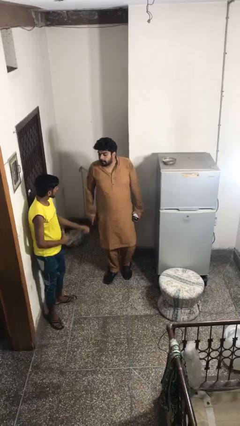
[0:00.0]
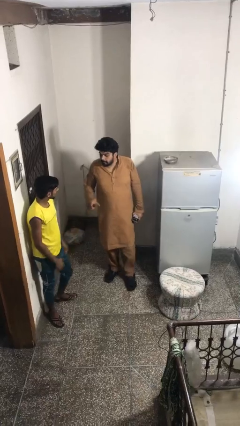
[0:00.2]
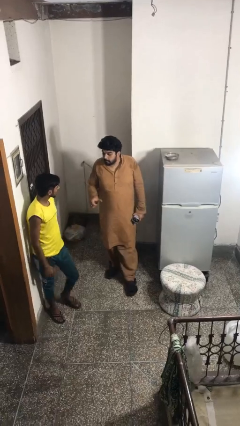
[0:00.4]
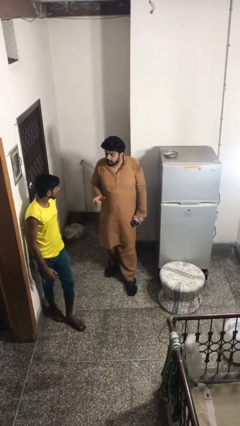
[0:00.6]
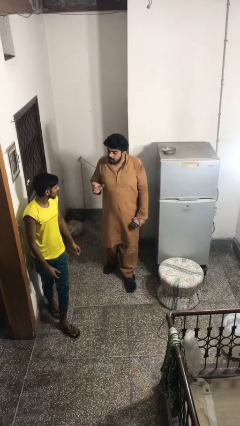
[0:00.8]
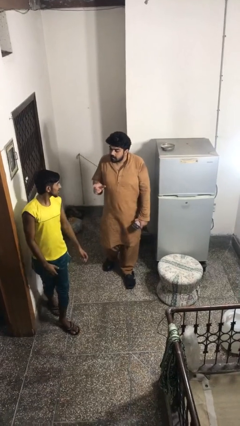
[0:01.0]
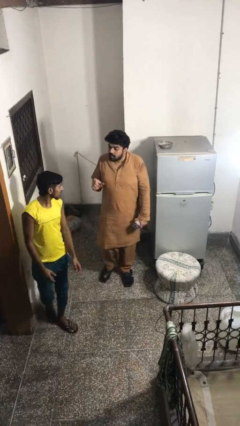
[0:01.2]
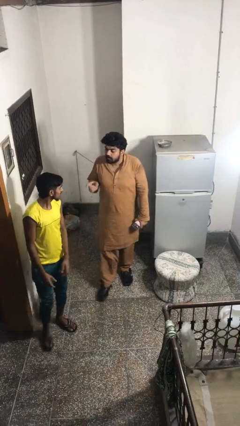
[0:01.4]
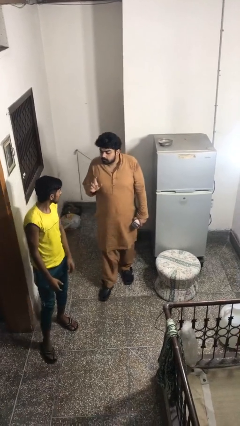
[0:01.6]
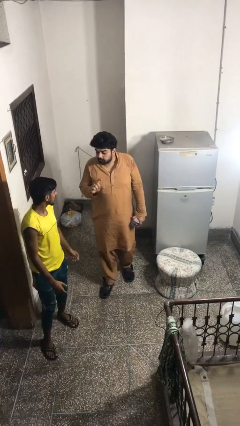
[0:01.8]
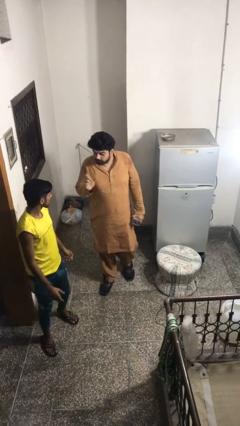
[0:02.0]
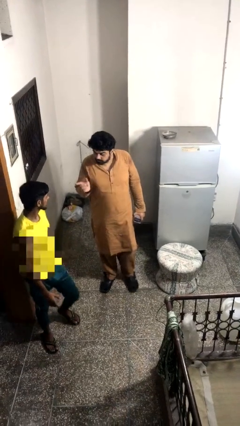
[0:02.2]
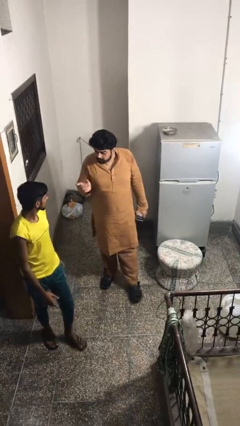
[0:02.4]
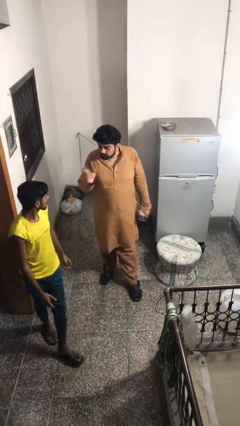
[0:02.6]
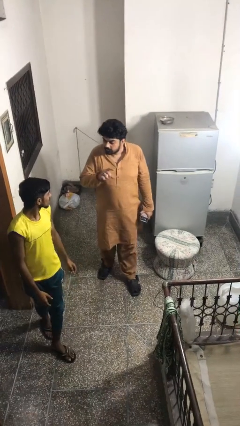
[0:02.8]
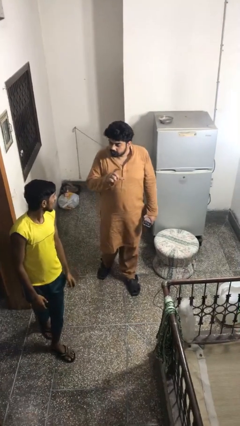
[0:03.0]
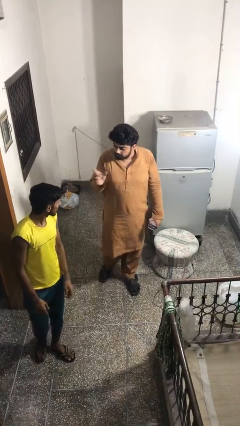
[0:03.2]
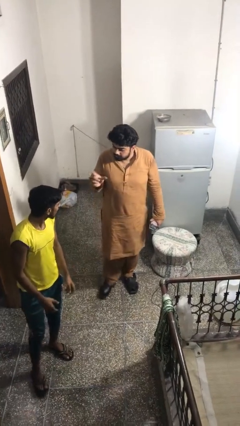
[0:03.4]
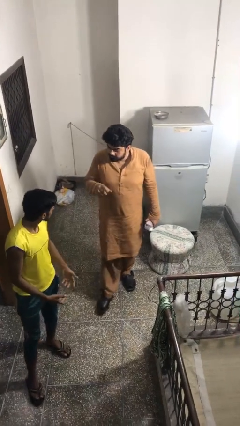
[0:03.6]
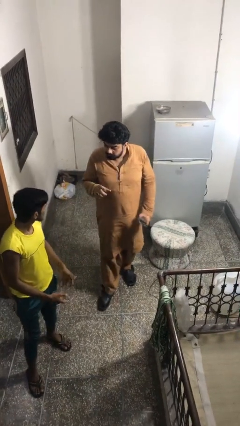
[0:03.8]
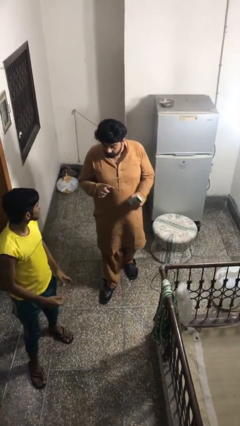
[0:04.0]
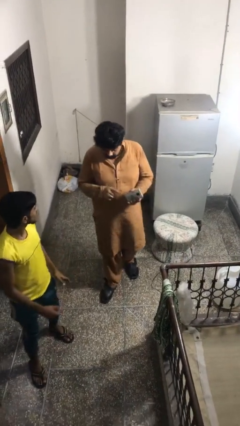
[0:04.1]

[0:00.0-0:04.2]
person talks to person

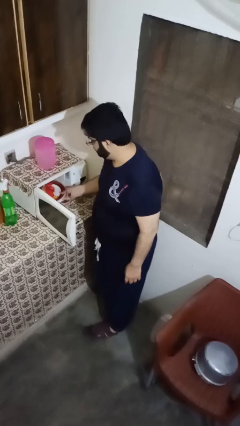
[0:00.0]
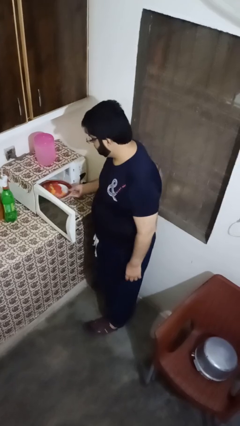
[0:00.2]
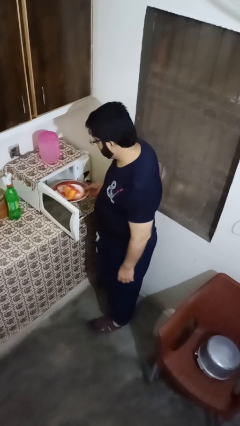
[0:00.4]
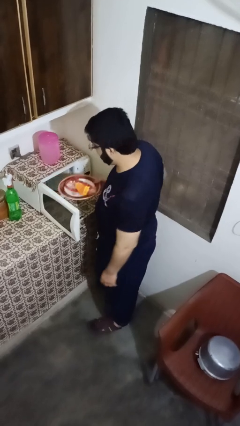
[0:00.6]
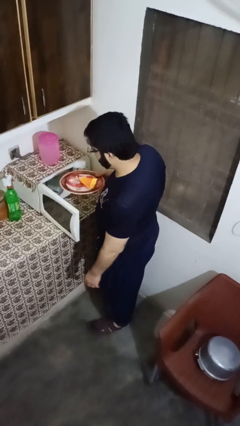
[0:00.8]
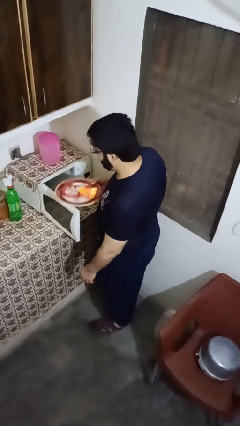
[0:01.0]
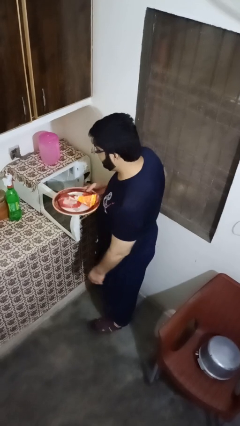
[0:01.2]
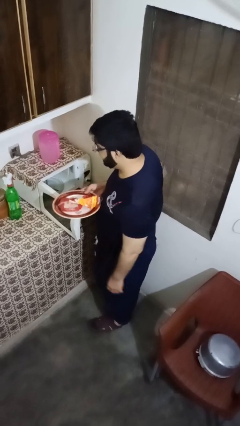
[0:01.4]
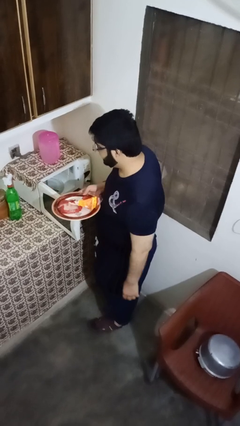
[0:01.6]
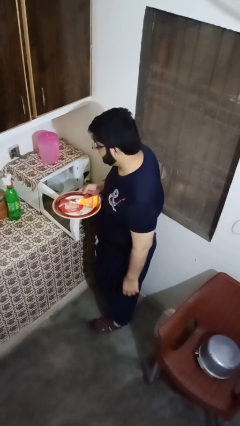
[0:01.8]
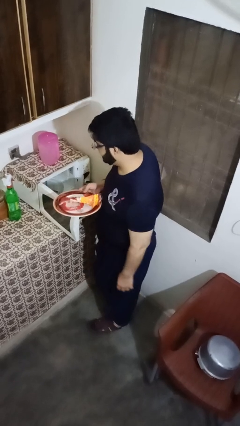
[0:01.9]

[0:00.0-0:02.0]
person takes object from oven

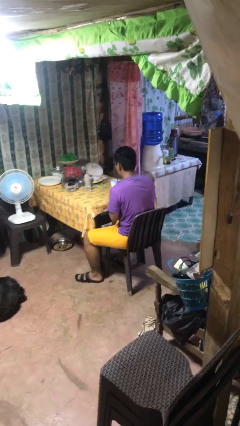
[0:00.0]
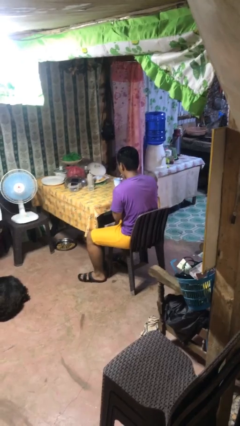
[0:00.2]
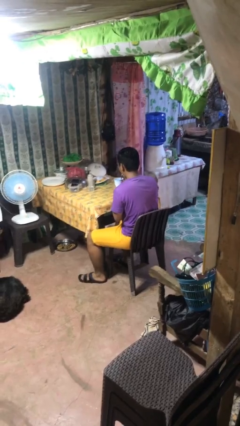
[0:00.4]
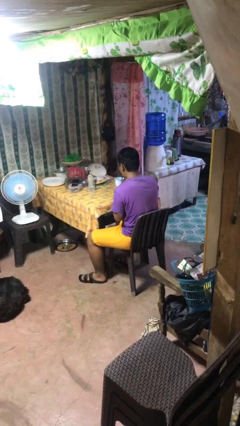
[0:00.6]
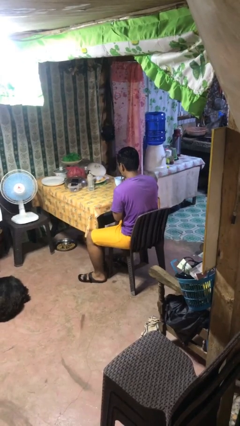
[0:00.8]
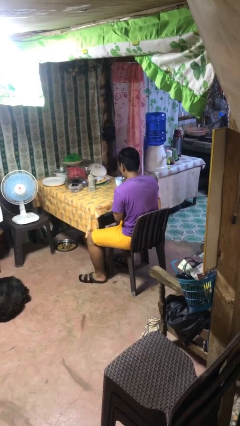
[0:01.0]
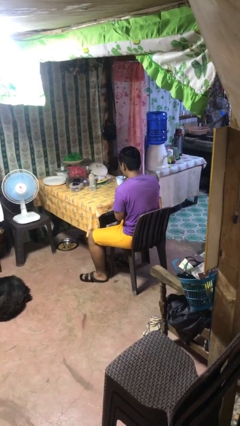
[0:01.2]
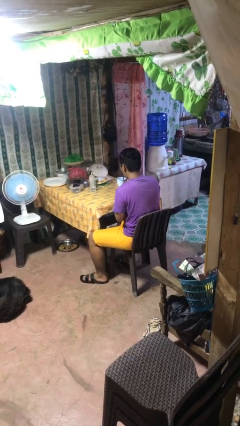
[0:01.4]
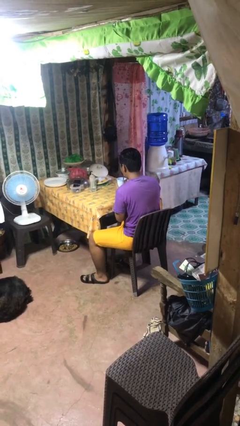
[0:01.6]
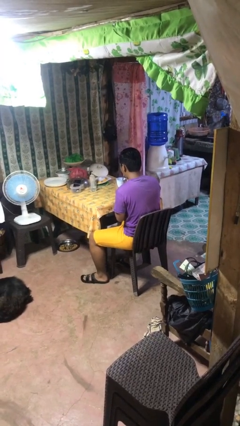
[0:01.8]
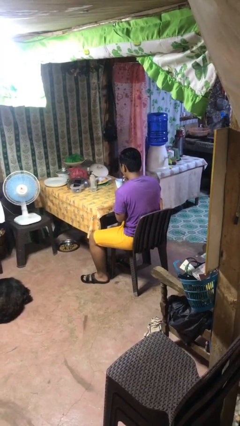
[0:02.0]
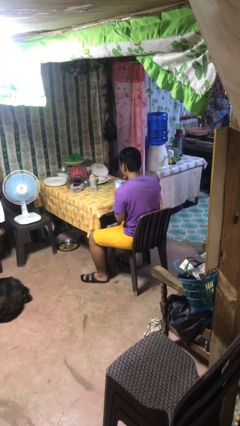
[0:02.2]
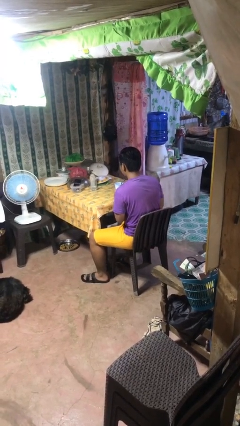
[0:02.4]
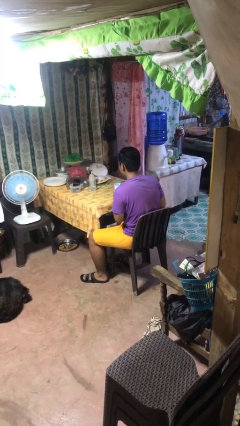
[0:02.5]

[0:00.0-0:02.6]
person drinks from straw

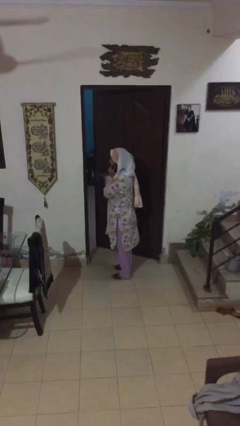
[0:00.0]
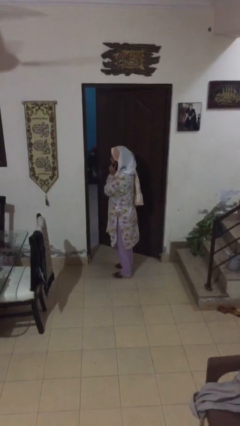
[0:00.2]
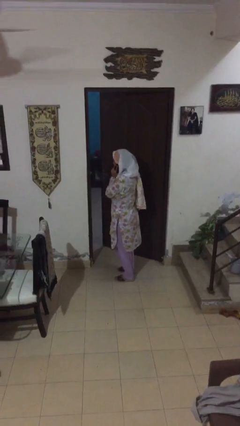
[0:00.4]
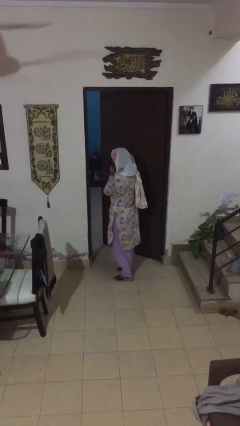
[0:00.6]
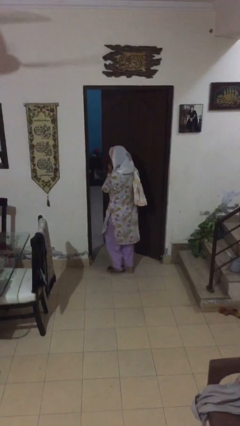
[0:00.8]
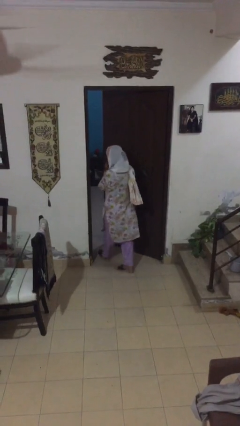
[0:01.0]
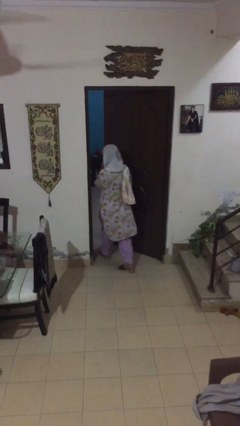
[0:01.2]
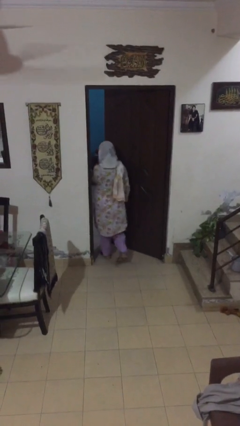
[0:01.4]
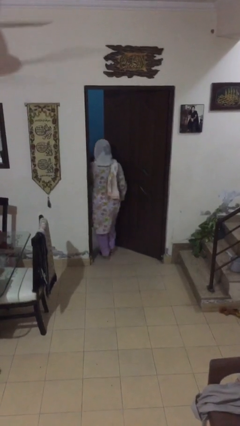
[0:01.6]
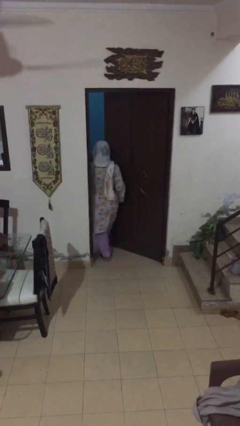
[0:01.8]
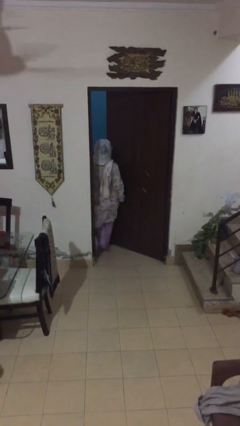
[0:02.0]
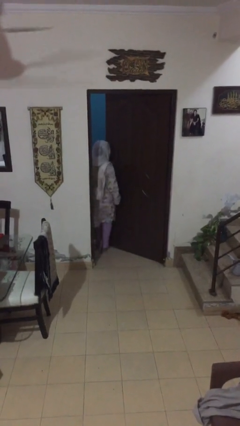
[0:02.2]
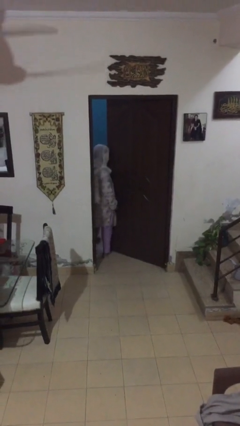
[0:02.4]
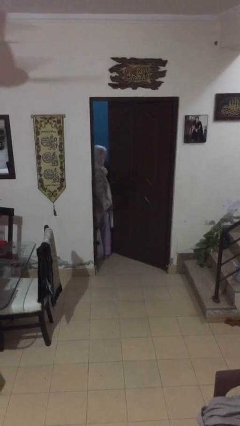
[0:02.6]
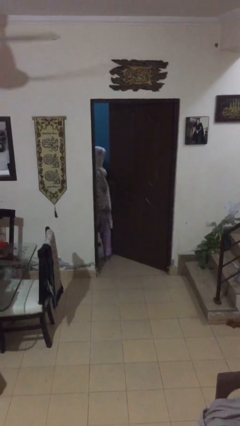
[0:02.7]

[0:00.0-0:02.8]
person exits scene through structure

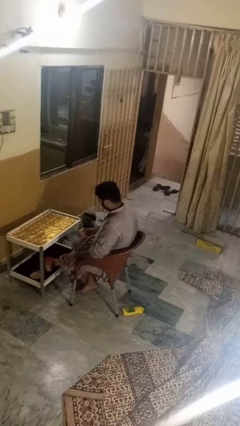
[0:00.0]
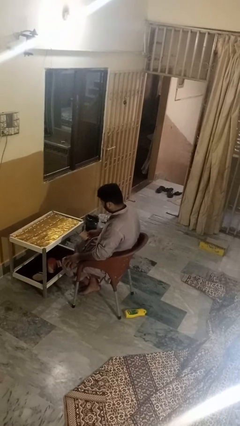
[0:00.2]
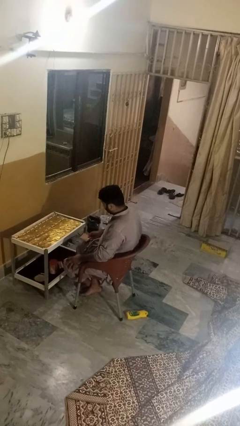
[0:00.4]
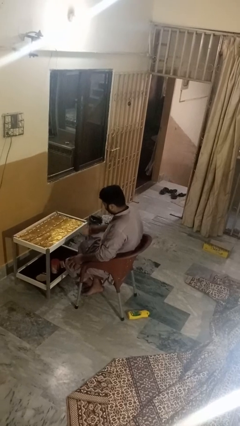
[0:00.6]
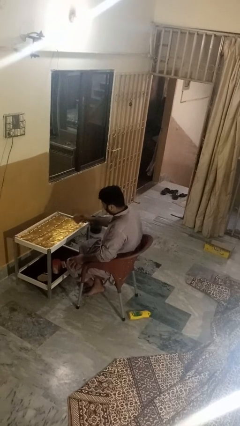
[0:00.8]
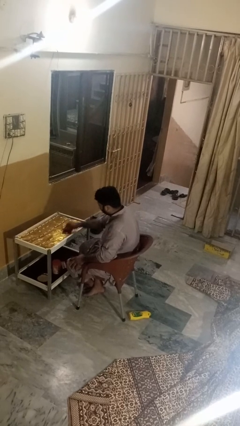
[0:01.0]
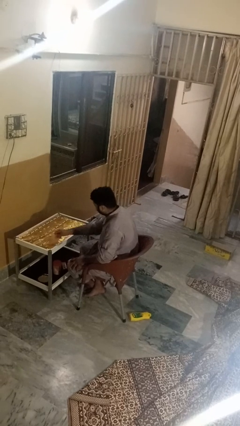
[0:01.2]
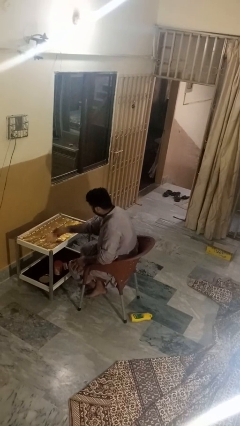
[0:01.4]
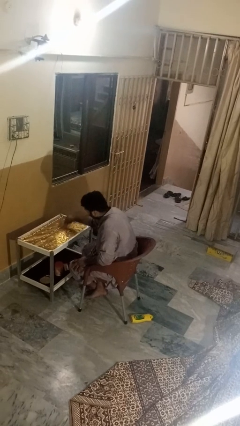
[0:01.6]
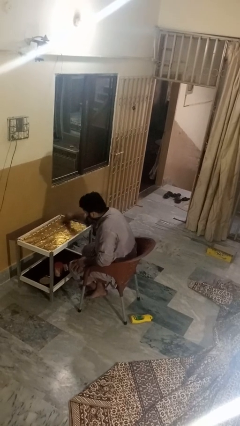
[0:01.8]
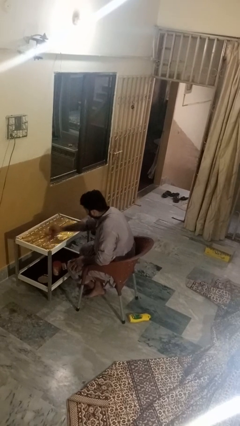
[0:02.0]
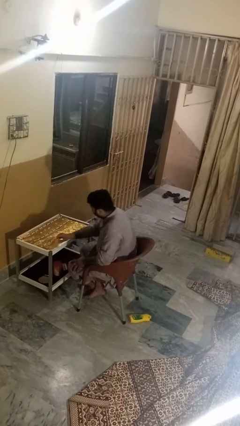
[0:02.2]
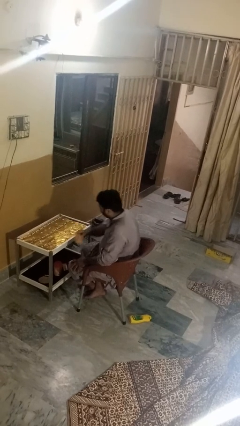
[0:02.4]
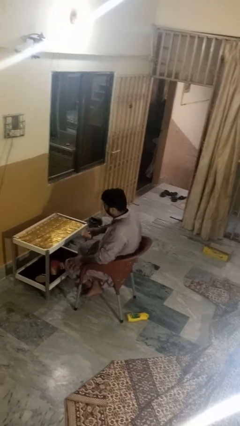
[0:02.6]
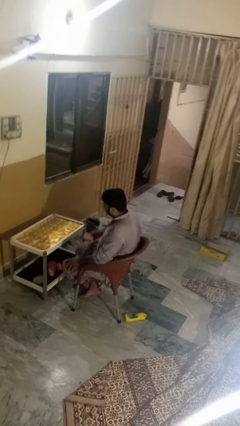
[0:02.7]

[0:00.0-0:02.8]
person cleans table with rag

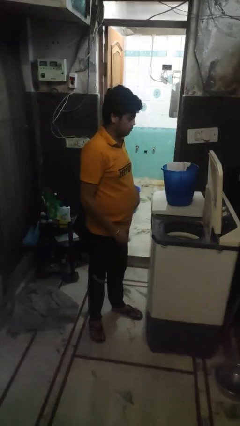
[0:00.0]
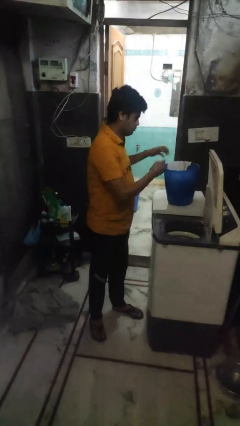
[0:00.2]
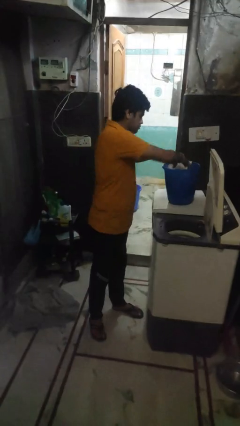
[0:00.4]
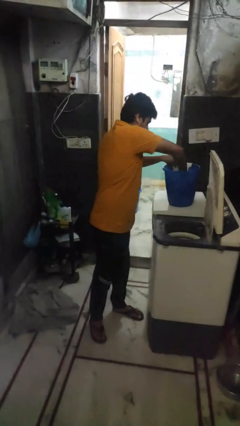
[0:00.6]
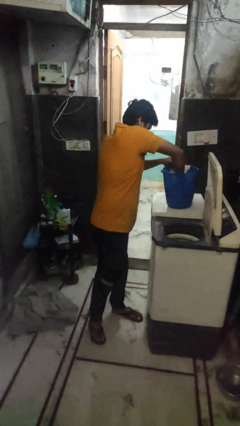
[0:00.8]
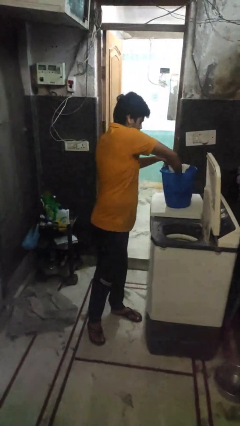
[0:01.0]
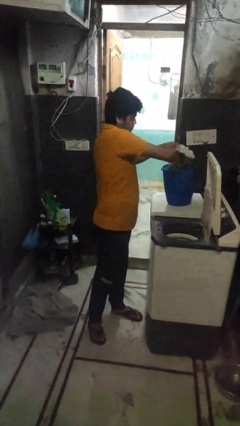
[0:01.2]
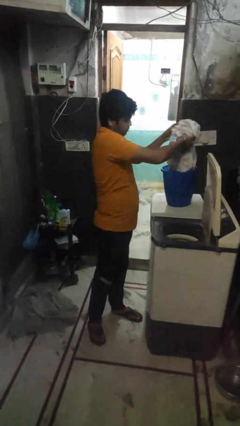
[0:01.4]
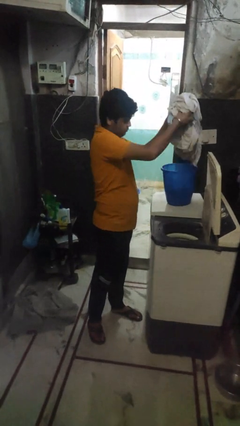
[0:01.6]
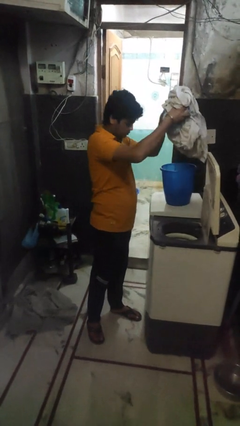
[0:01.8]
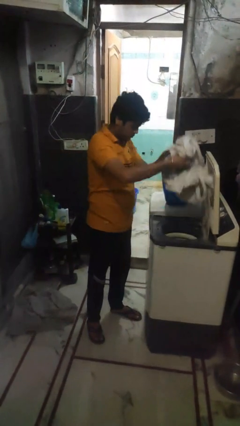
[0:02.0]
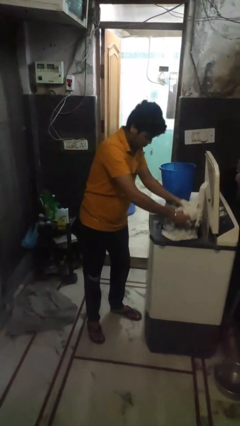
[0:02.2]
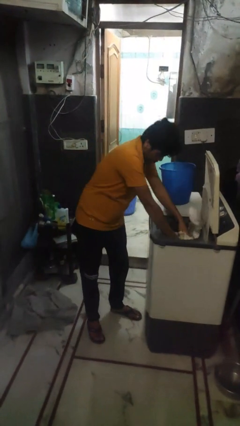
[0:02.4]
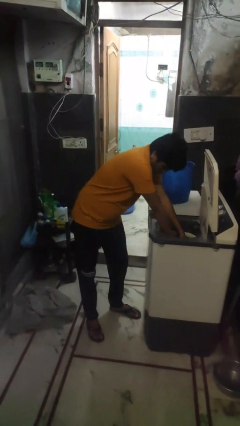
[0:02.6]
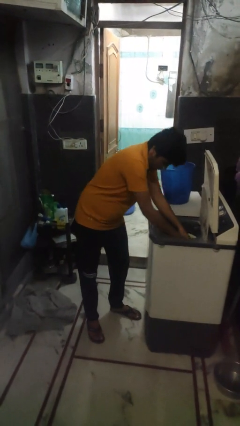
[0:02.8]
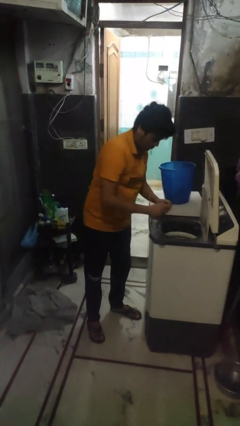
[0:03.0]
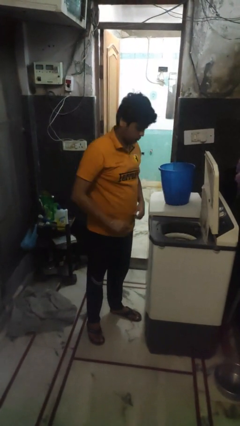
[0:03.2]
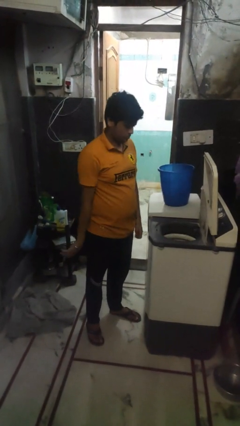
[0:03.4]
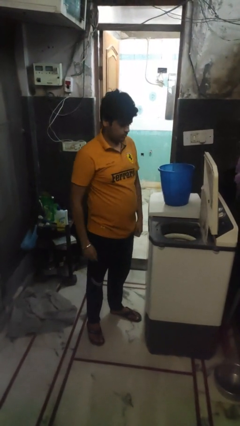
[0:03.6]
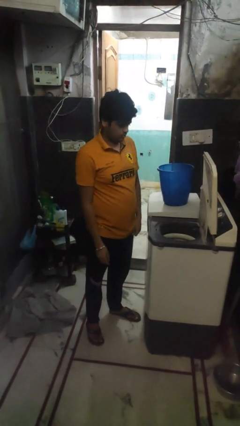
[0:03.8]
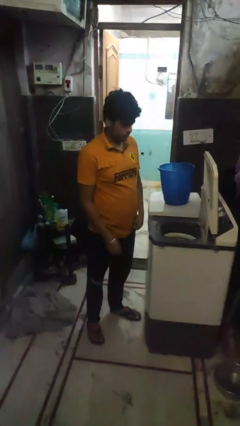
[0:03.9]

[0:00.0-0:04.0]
person loads clotheswasher
